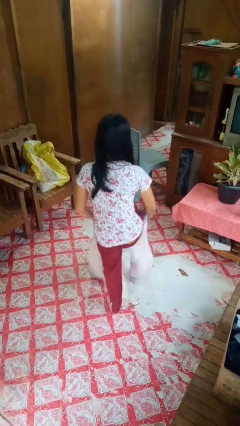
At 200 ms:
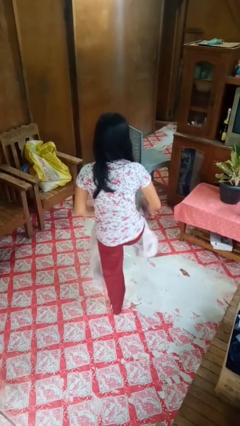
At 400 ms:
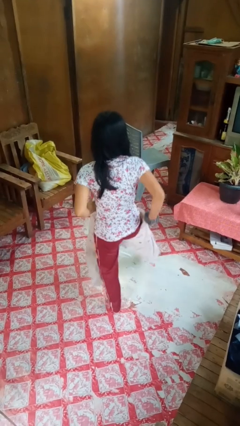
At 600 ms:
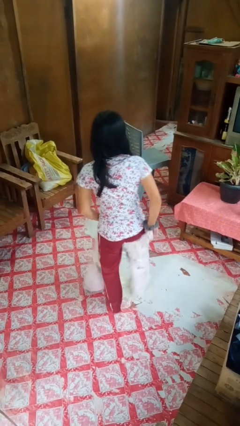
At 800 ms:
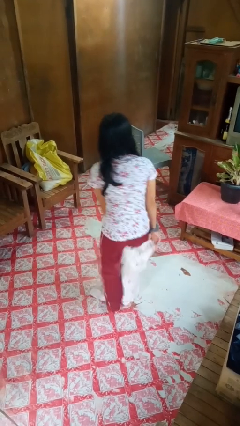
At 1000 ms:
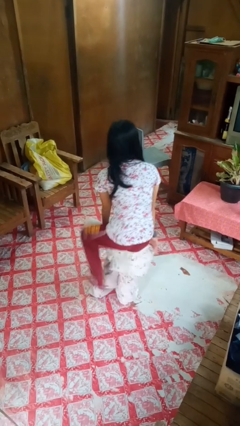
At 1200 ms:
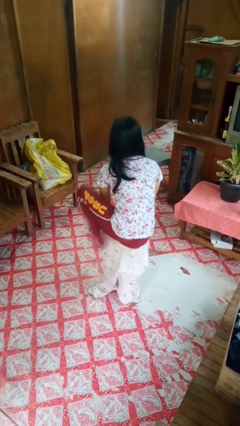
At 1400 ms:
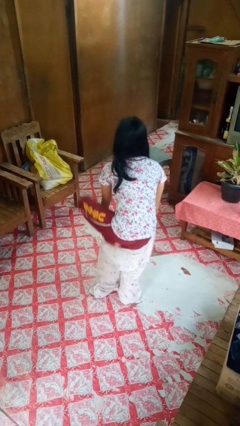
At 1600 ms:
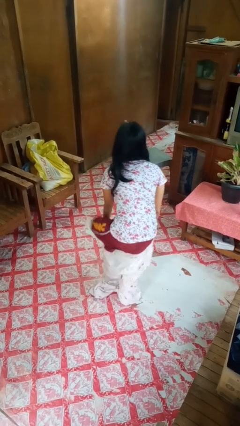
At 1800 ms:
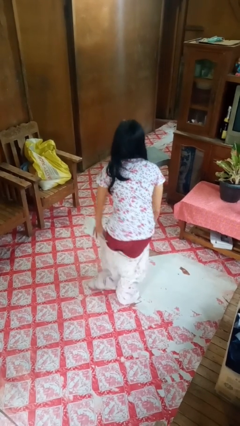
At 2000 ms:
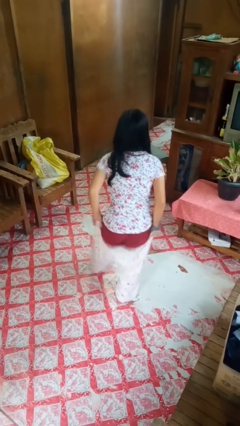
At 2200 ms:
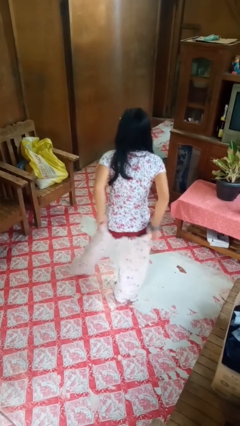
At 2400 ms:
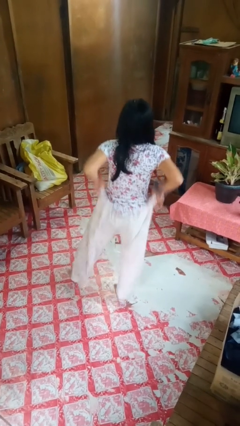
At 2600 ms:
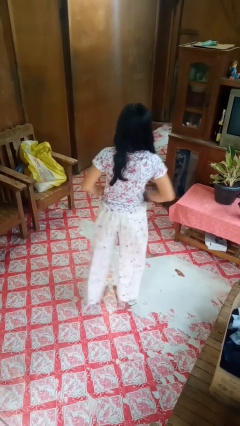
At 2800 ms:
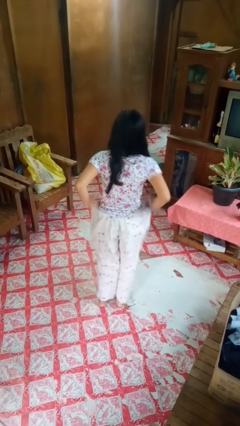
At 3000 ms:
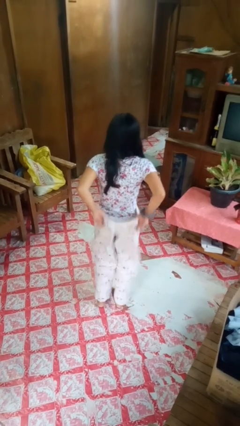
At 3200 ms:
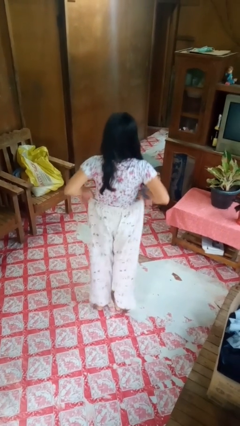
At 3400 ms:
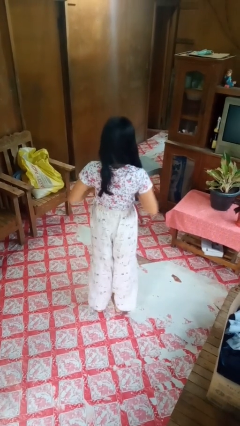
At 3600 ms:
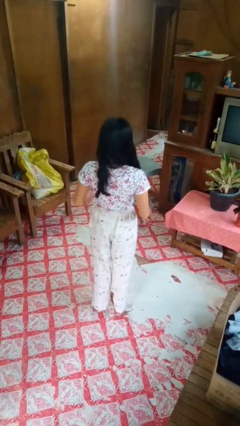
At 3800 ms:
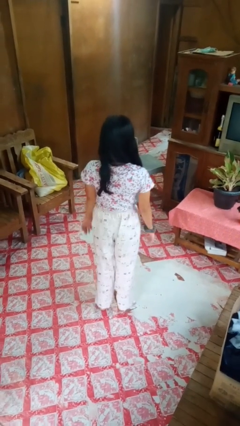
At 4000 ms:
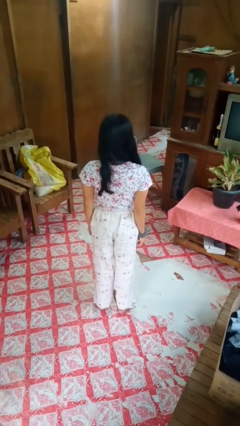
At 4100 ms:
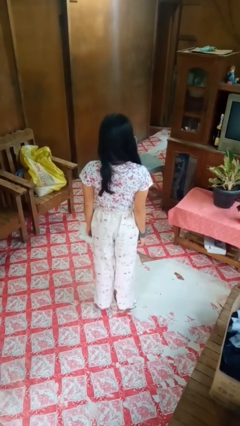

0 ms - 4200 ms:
person puts on pants

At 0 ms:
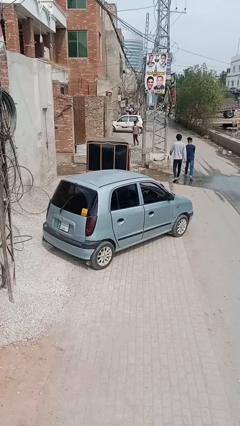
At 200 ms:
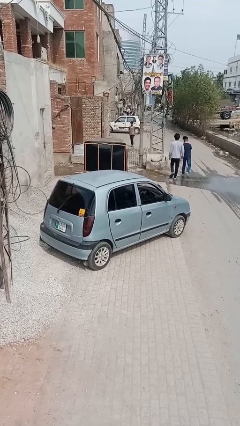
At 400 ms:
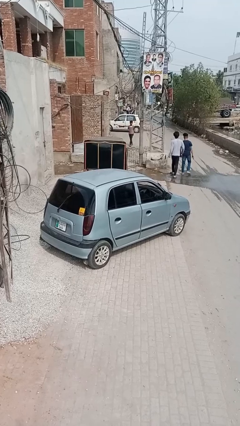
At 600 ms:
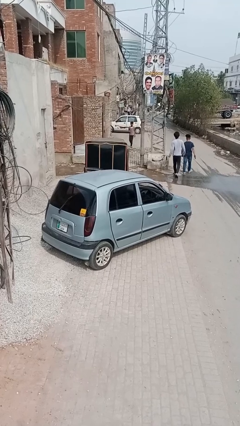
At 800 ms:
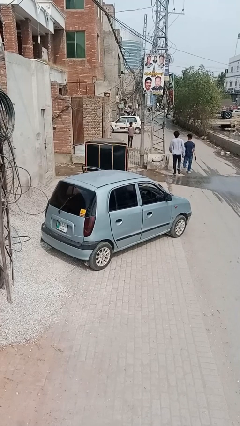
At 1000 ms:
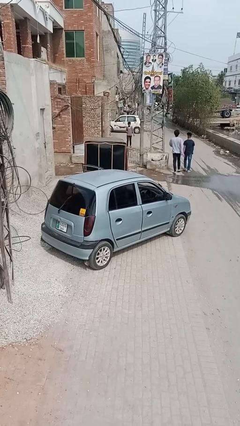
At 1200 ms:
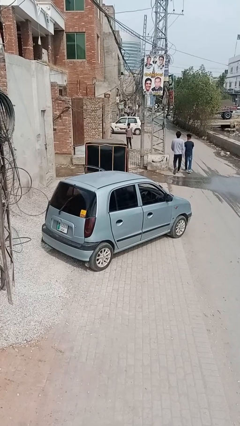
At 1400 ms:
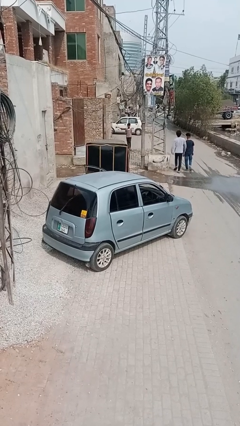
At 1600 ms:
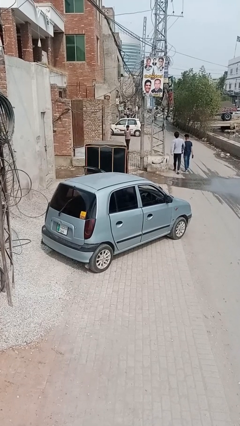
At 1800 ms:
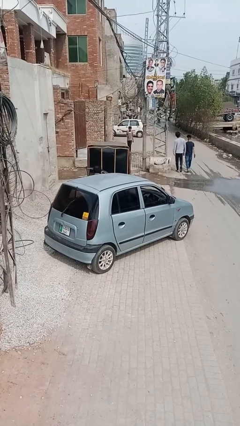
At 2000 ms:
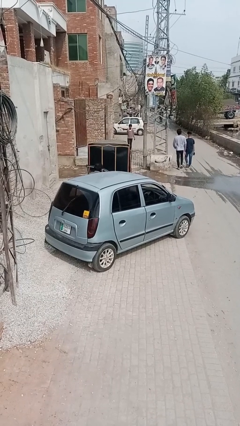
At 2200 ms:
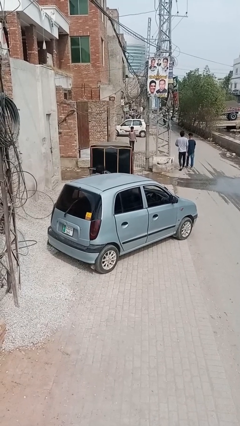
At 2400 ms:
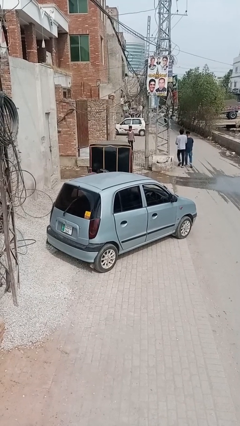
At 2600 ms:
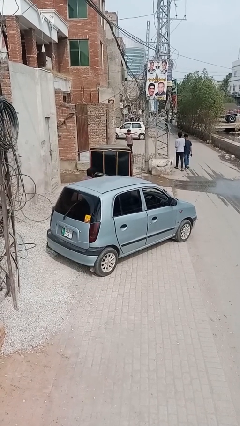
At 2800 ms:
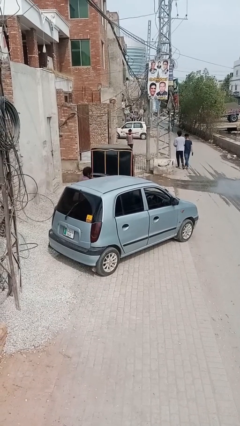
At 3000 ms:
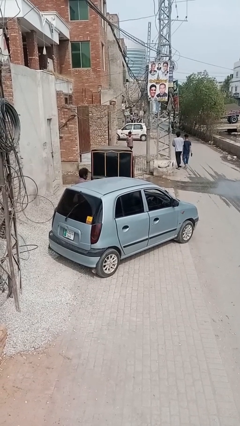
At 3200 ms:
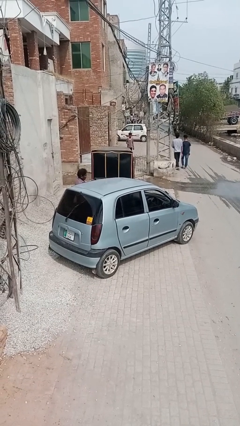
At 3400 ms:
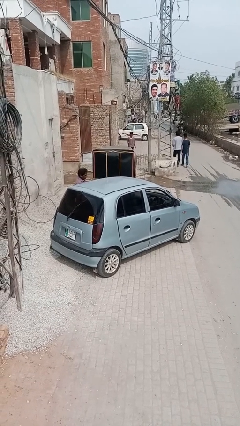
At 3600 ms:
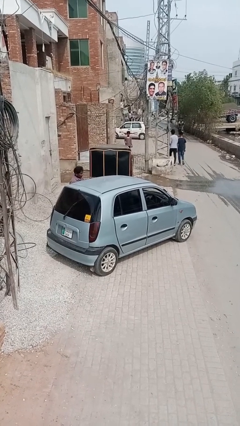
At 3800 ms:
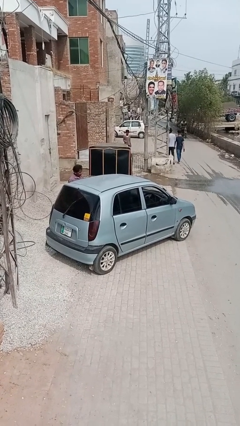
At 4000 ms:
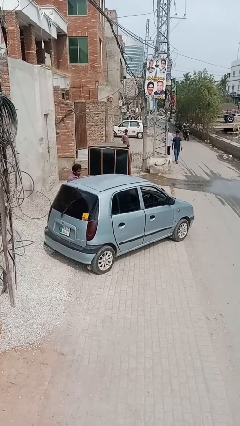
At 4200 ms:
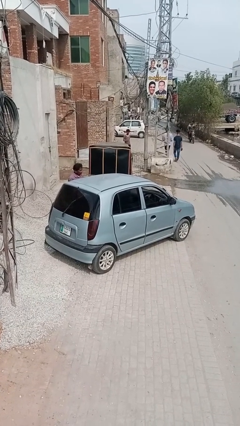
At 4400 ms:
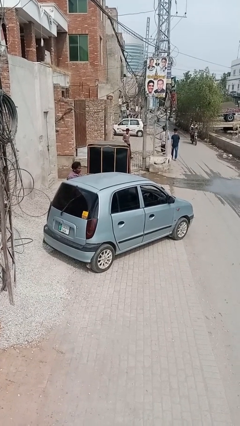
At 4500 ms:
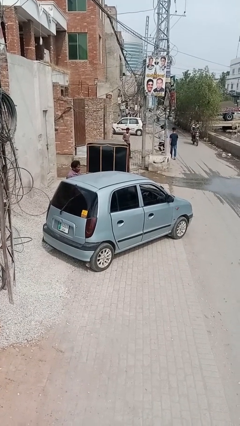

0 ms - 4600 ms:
car drops off person

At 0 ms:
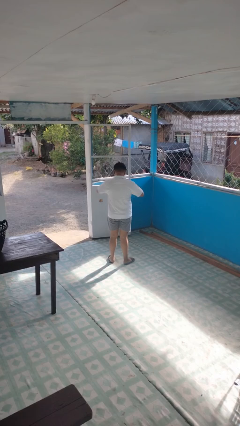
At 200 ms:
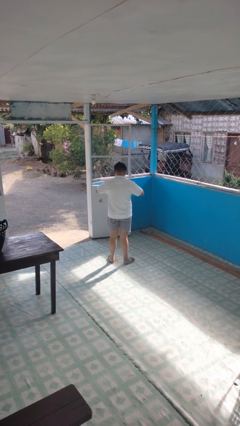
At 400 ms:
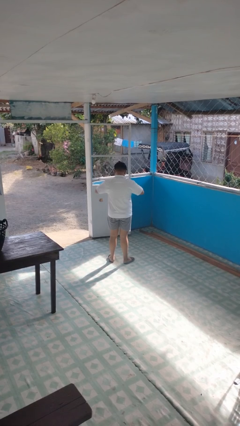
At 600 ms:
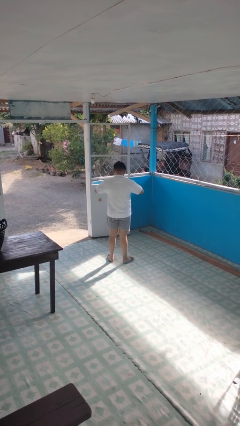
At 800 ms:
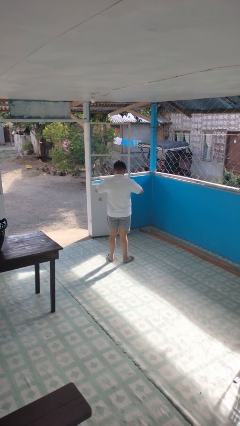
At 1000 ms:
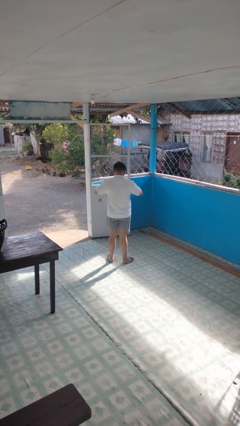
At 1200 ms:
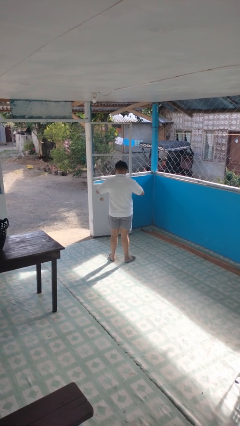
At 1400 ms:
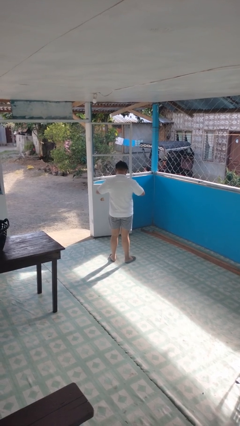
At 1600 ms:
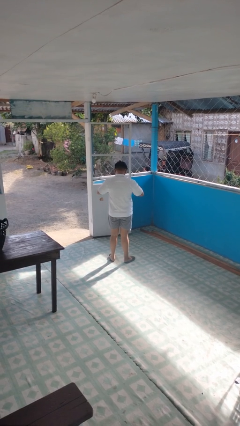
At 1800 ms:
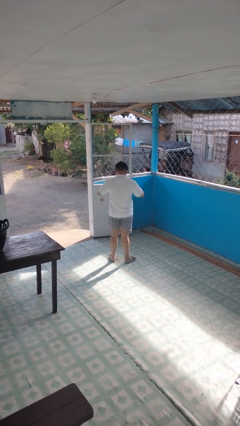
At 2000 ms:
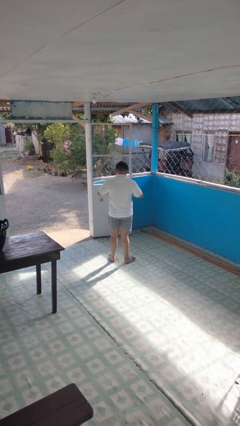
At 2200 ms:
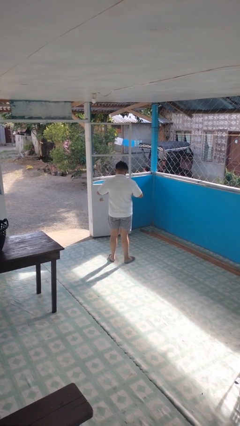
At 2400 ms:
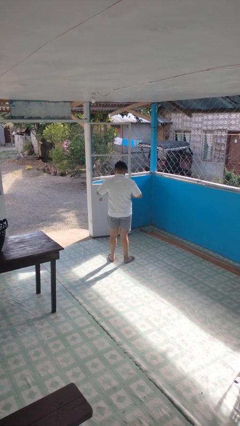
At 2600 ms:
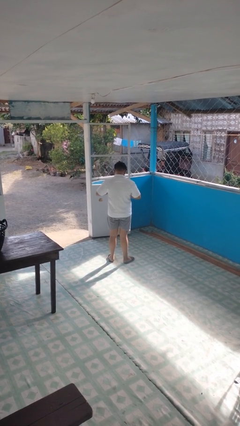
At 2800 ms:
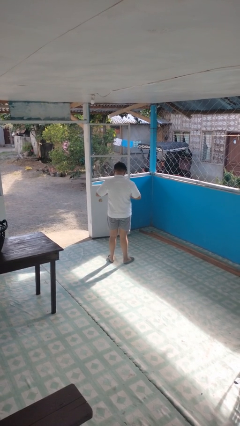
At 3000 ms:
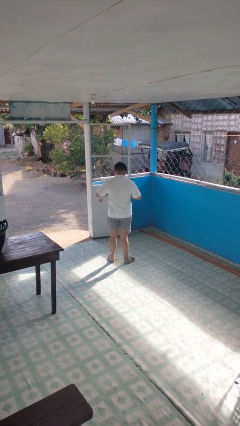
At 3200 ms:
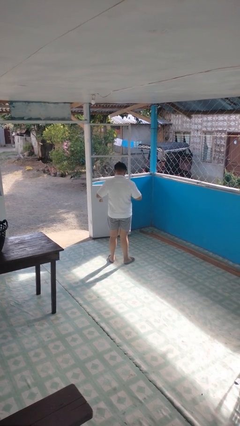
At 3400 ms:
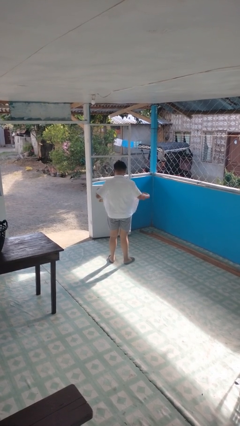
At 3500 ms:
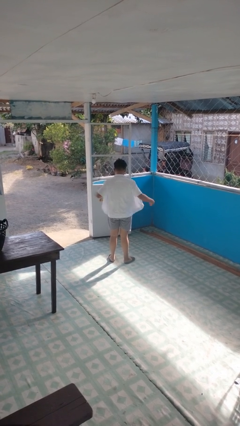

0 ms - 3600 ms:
person unbuttons shirt

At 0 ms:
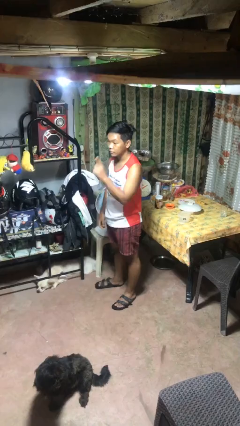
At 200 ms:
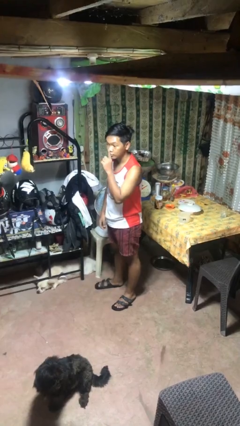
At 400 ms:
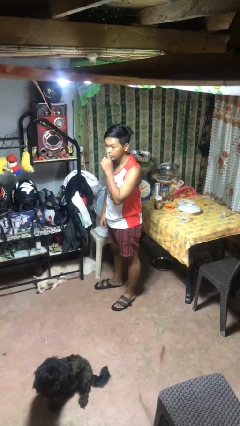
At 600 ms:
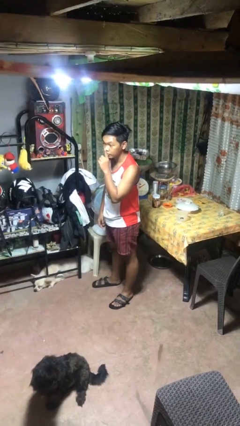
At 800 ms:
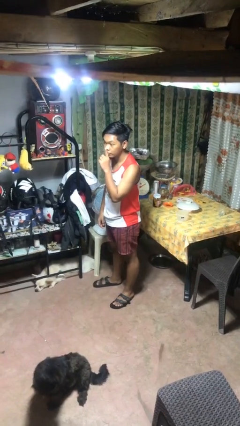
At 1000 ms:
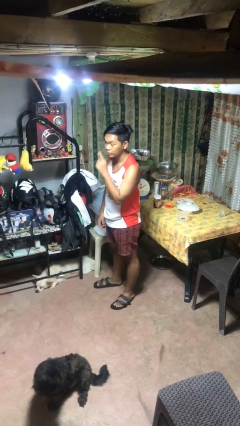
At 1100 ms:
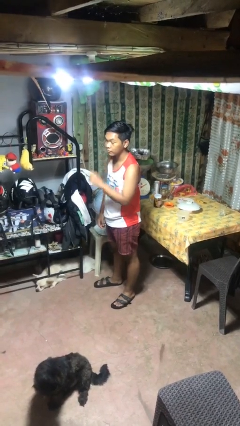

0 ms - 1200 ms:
person gestures be quiet

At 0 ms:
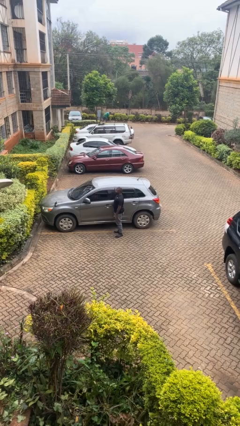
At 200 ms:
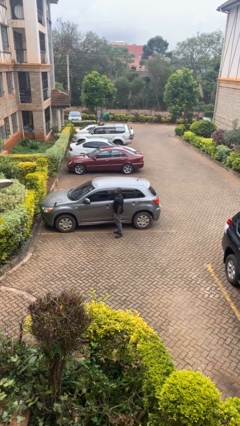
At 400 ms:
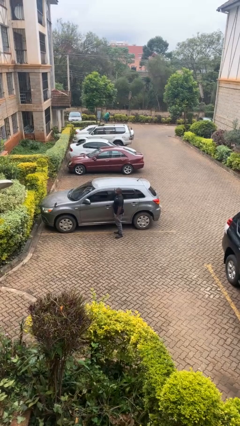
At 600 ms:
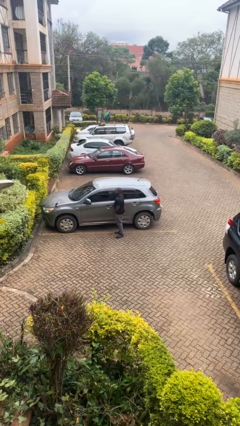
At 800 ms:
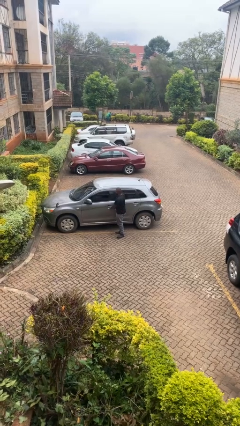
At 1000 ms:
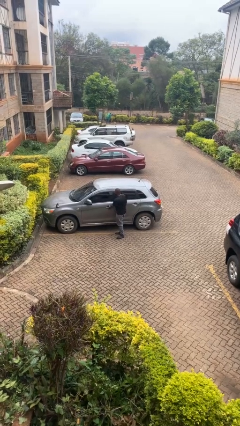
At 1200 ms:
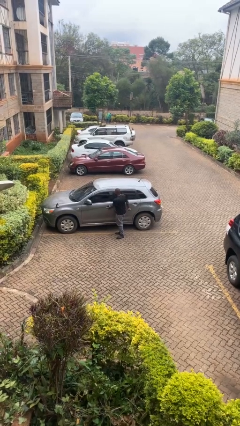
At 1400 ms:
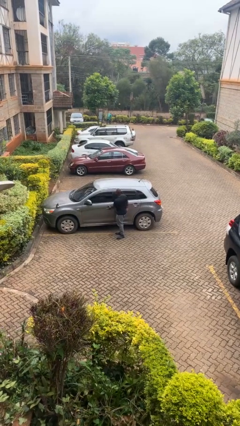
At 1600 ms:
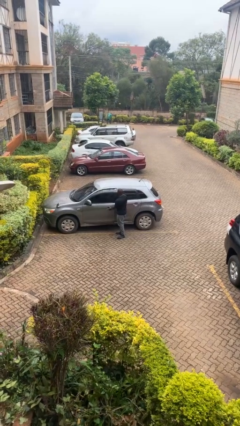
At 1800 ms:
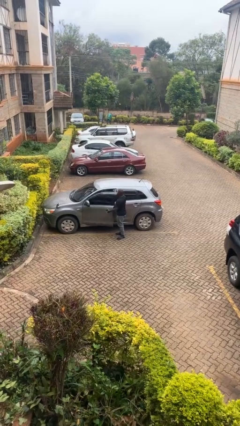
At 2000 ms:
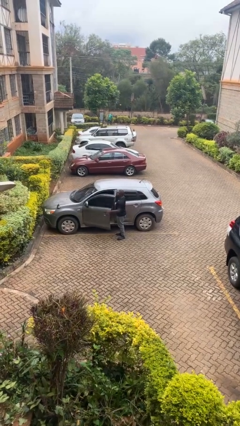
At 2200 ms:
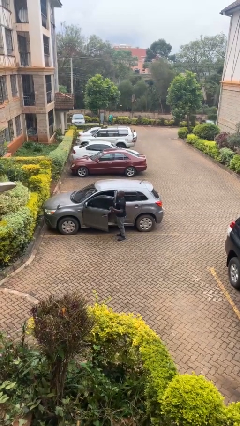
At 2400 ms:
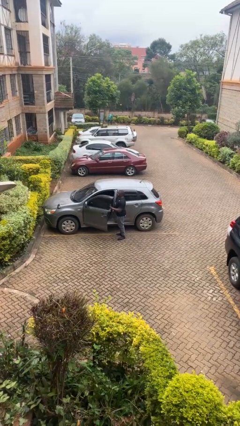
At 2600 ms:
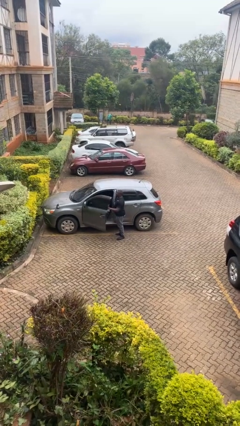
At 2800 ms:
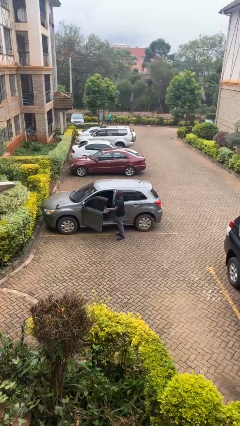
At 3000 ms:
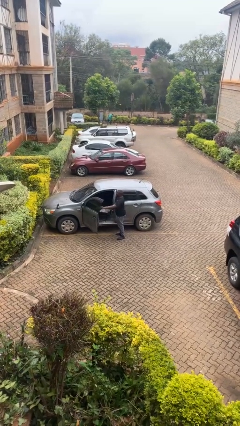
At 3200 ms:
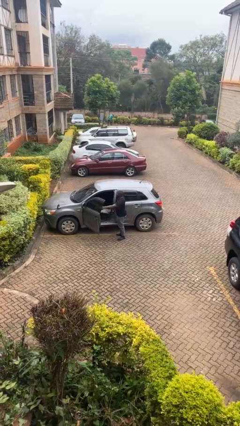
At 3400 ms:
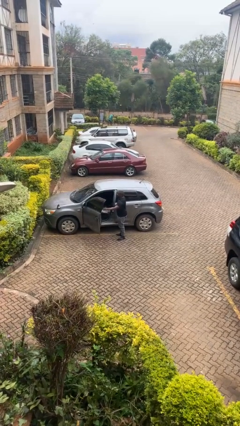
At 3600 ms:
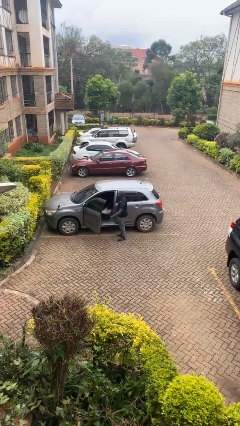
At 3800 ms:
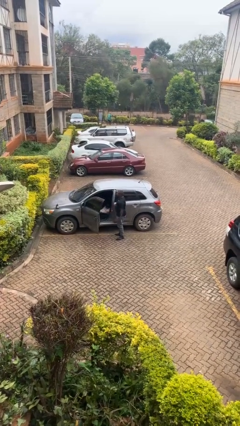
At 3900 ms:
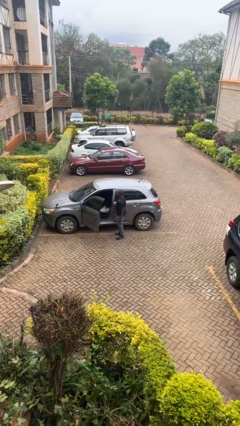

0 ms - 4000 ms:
person opens car door
